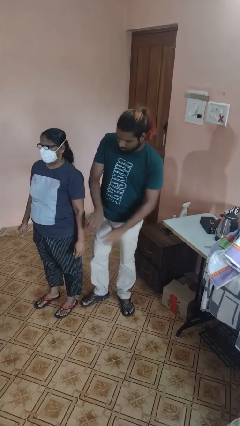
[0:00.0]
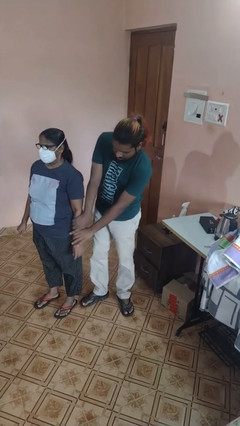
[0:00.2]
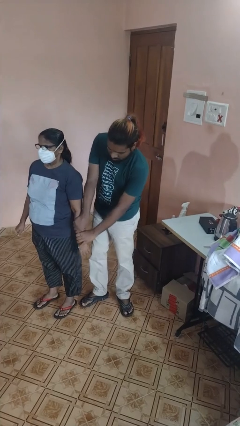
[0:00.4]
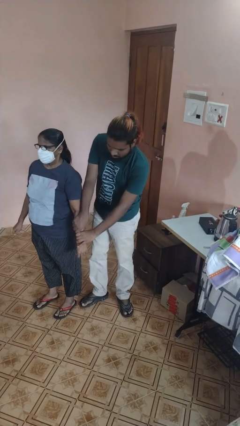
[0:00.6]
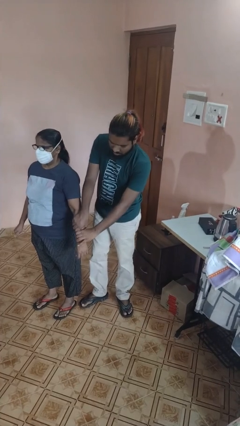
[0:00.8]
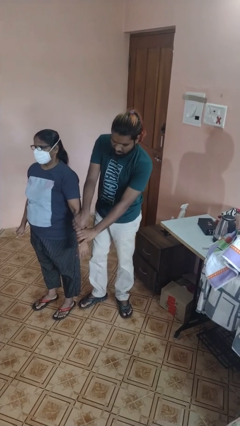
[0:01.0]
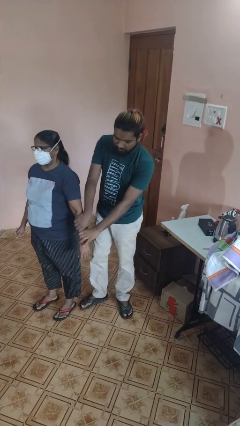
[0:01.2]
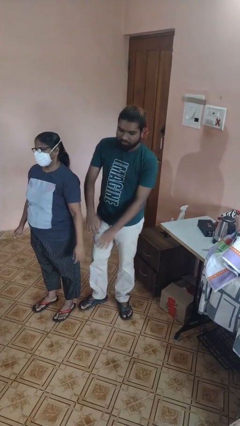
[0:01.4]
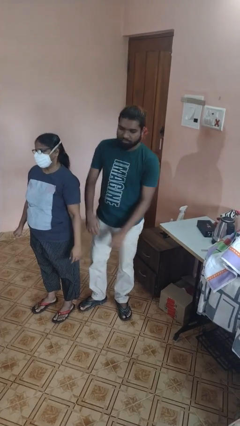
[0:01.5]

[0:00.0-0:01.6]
person grabs person by forearm

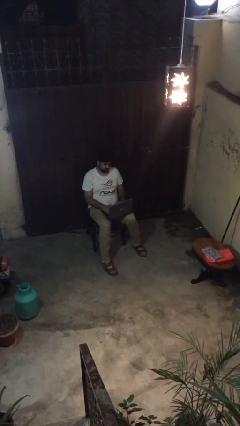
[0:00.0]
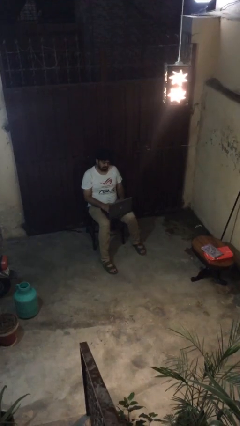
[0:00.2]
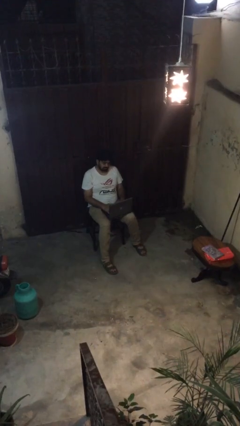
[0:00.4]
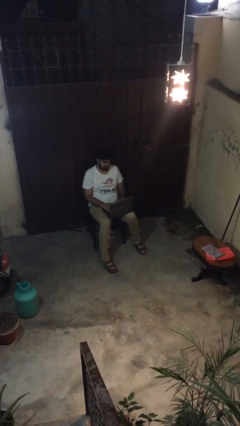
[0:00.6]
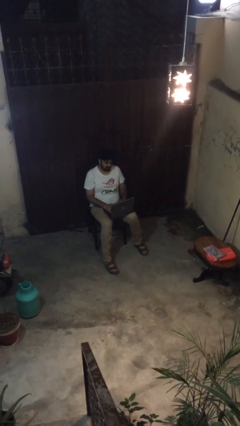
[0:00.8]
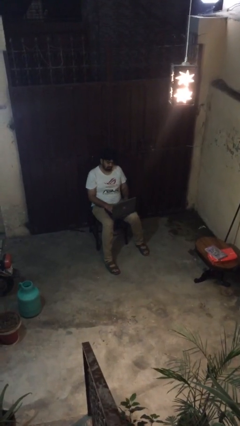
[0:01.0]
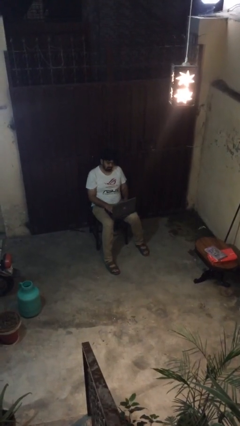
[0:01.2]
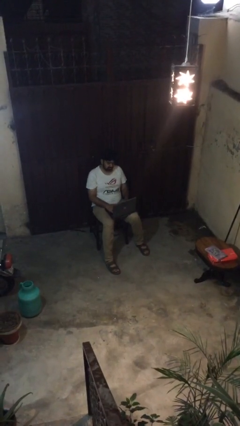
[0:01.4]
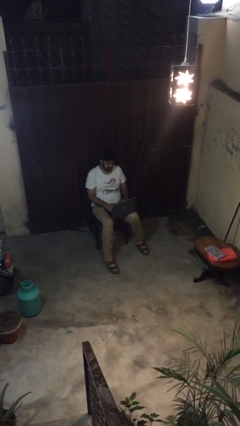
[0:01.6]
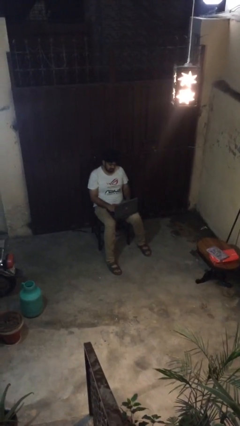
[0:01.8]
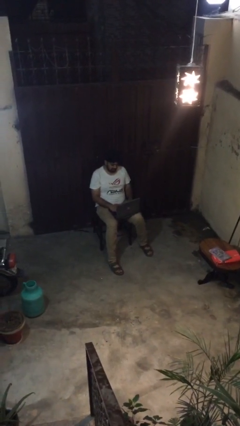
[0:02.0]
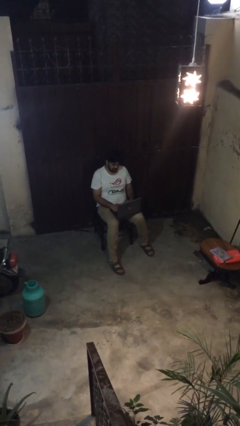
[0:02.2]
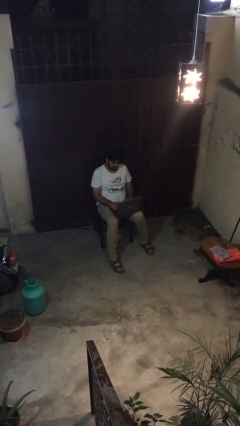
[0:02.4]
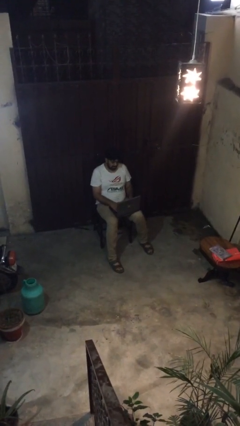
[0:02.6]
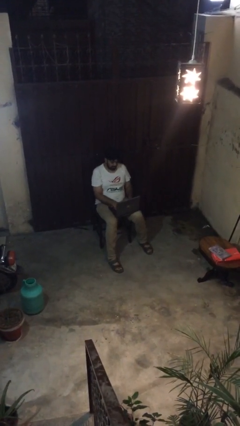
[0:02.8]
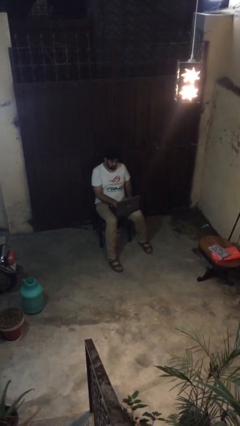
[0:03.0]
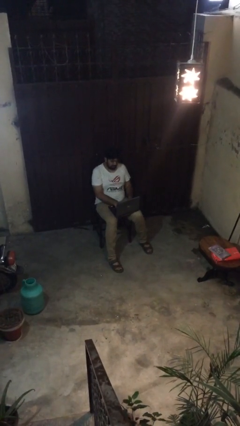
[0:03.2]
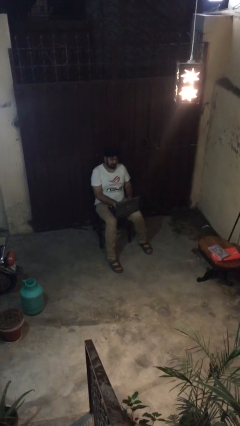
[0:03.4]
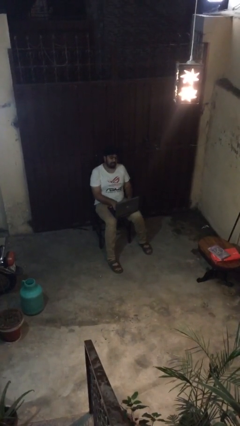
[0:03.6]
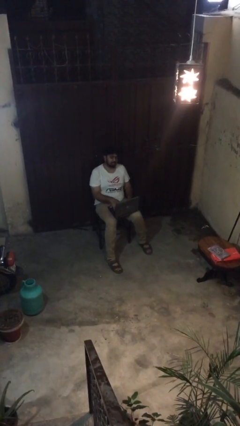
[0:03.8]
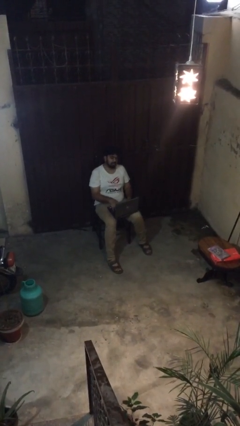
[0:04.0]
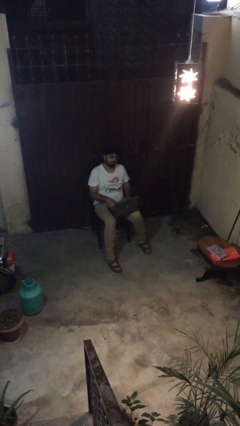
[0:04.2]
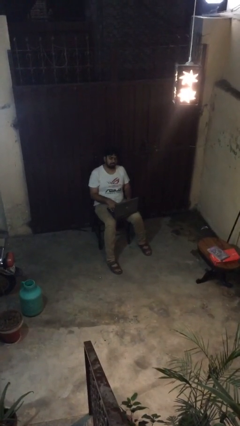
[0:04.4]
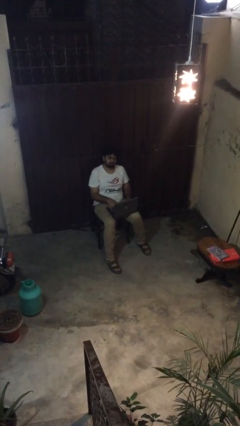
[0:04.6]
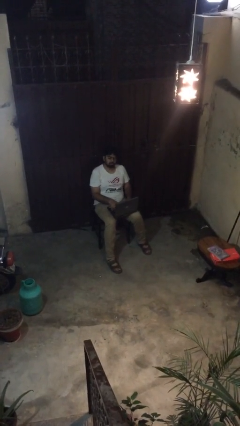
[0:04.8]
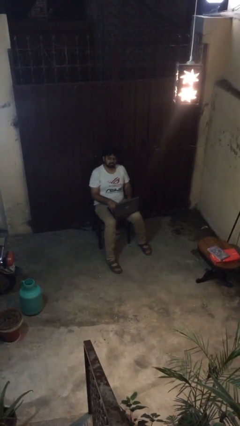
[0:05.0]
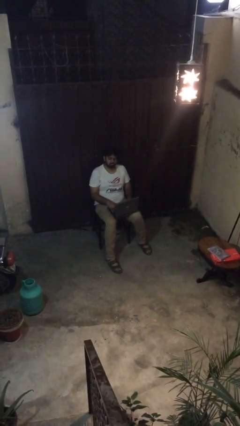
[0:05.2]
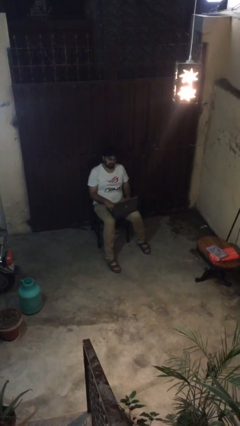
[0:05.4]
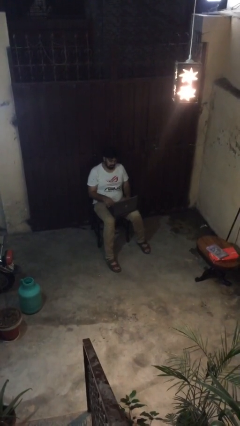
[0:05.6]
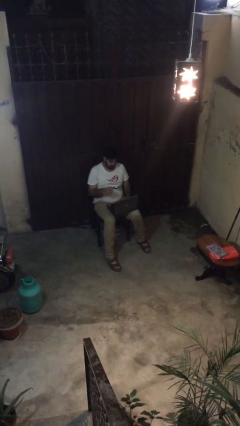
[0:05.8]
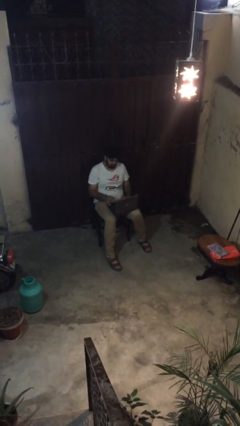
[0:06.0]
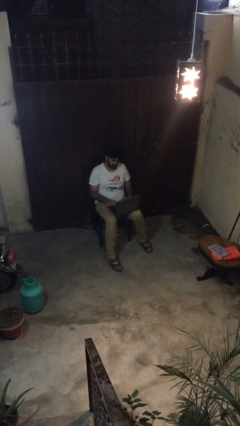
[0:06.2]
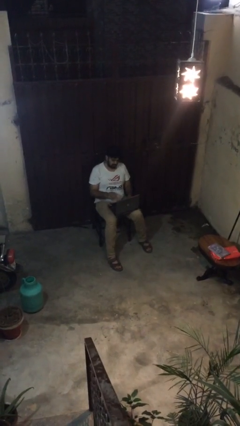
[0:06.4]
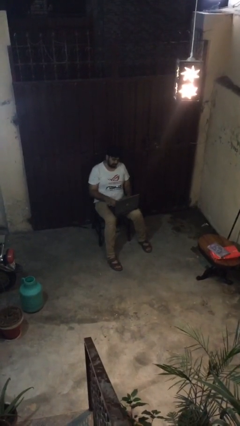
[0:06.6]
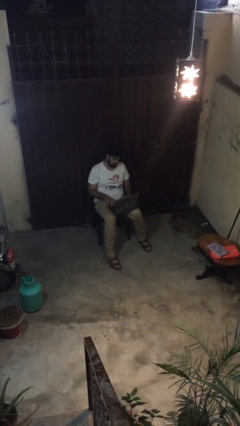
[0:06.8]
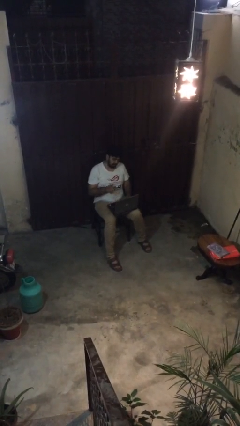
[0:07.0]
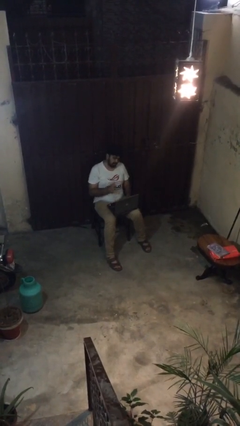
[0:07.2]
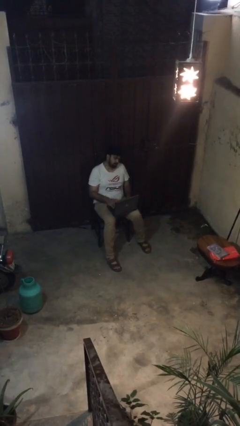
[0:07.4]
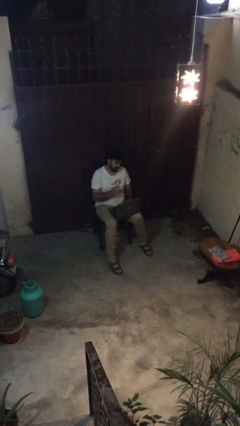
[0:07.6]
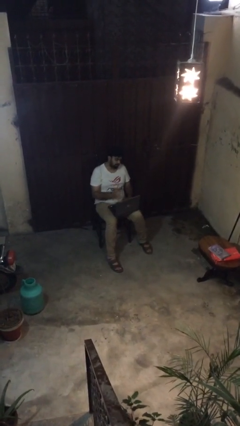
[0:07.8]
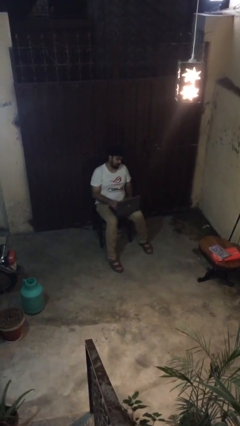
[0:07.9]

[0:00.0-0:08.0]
person interacts with laptop

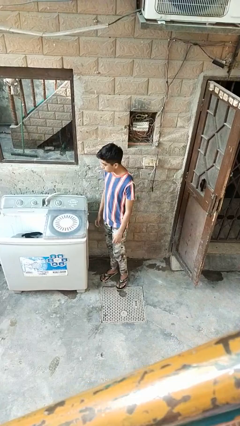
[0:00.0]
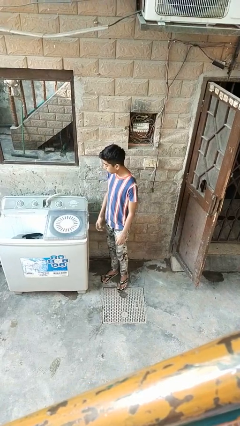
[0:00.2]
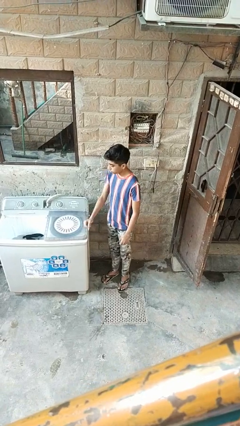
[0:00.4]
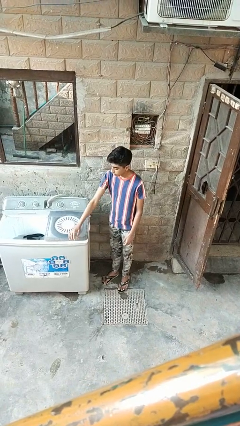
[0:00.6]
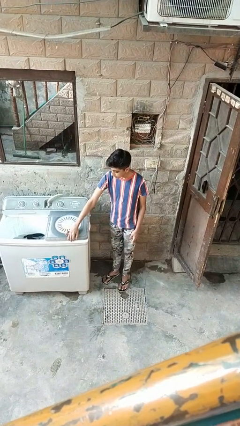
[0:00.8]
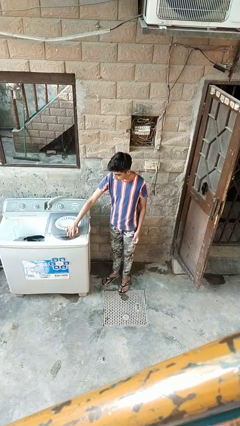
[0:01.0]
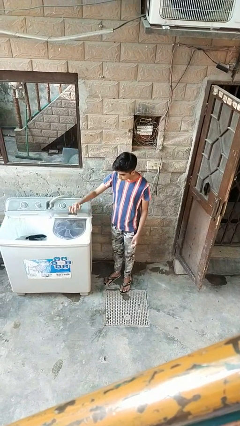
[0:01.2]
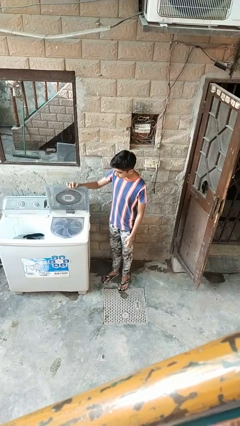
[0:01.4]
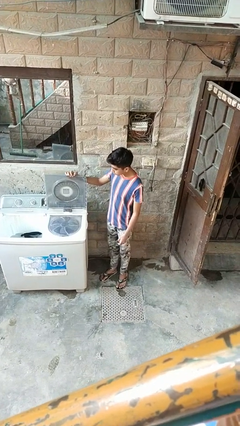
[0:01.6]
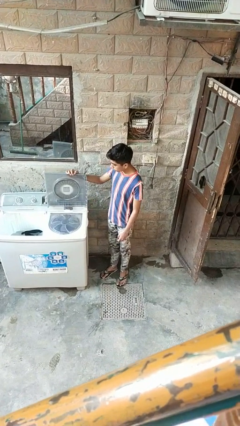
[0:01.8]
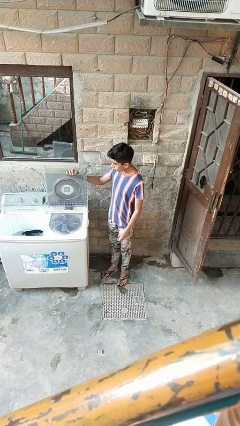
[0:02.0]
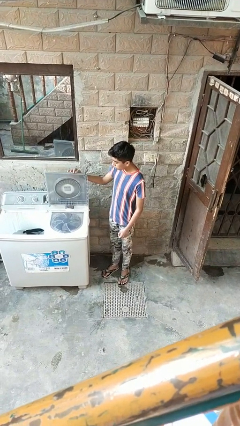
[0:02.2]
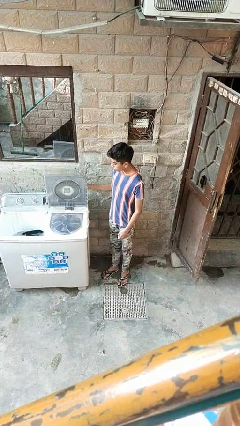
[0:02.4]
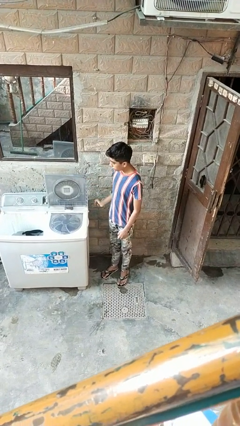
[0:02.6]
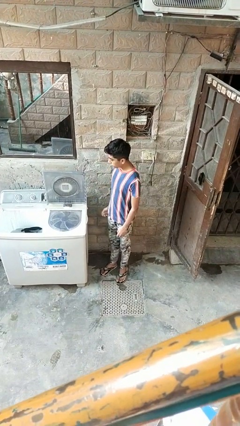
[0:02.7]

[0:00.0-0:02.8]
person opens clothes washer

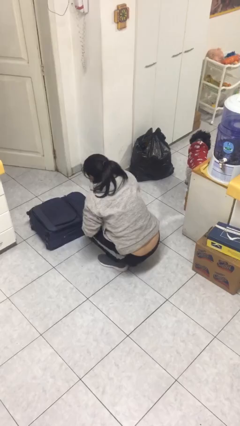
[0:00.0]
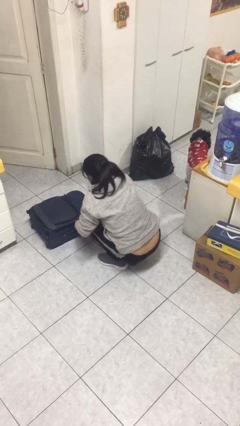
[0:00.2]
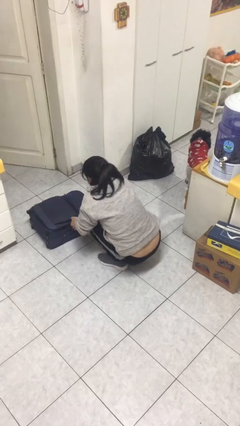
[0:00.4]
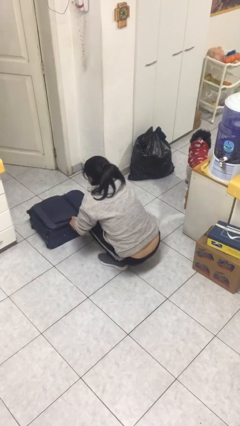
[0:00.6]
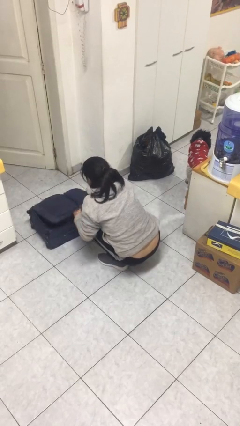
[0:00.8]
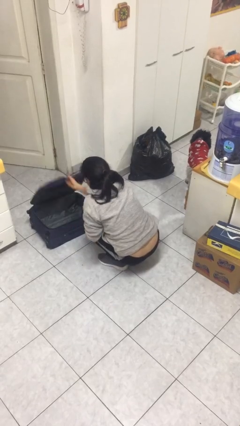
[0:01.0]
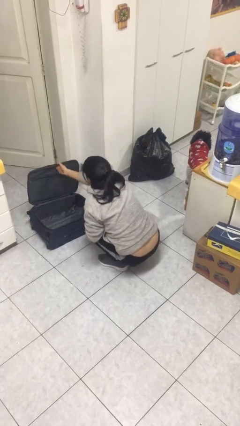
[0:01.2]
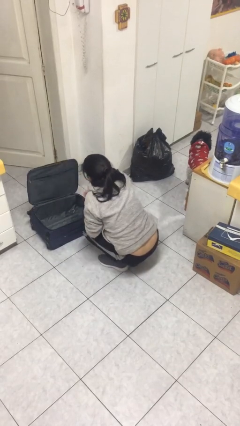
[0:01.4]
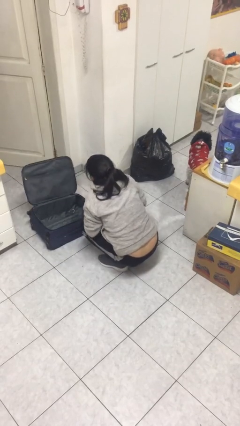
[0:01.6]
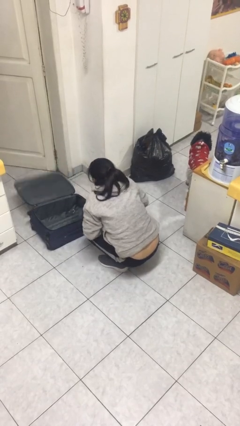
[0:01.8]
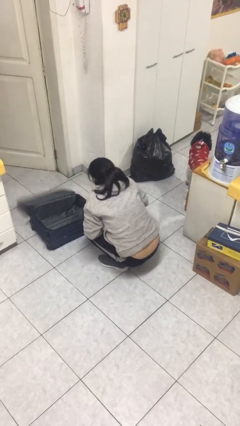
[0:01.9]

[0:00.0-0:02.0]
person opens suitcase

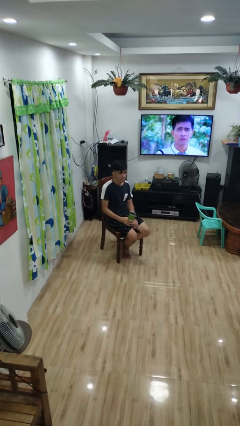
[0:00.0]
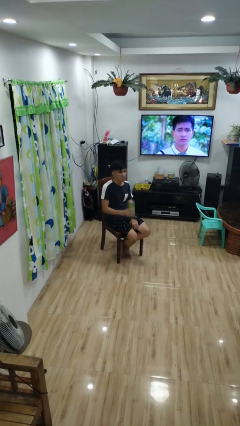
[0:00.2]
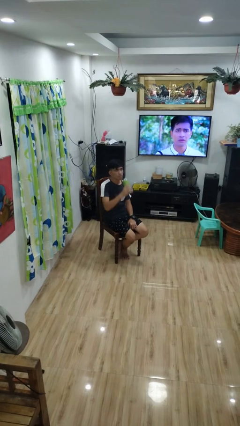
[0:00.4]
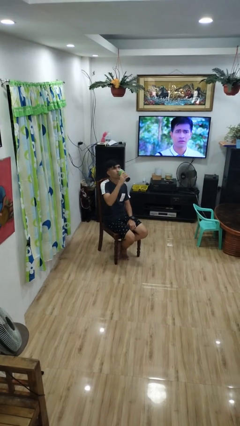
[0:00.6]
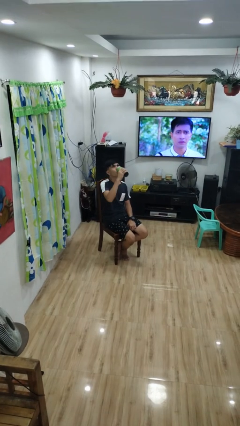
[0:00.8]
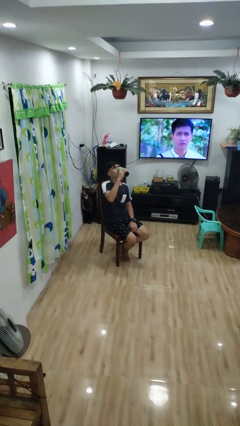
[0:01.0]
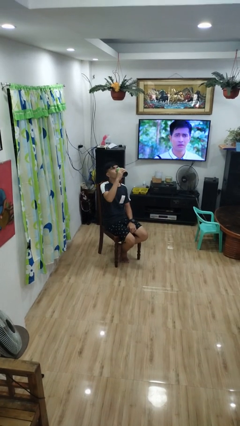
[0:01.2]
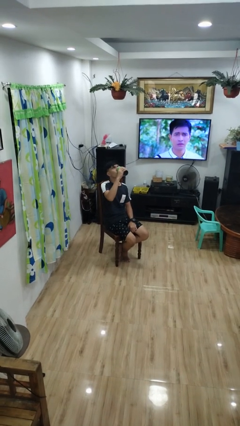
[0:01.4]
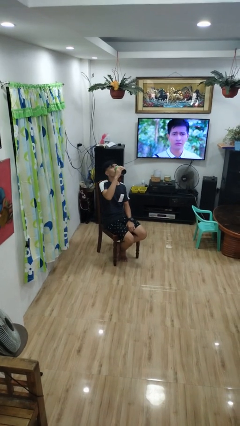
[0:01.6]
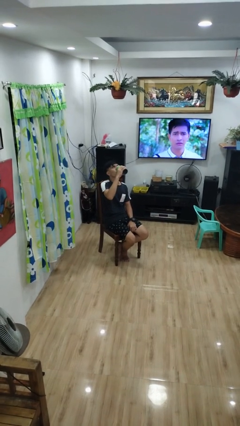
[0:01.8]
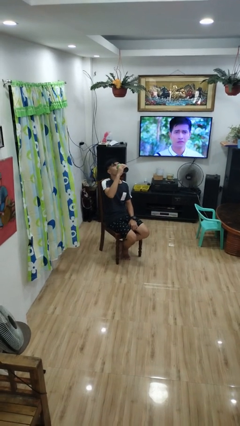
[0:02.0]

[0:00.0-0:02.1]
person drinks from bottle

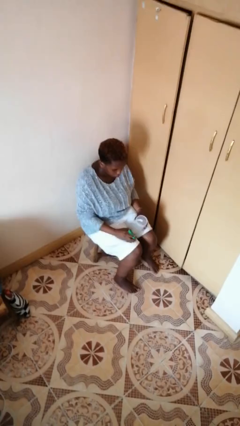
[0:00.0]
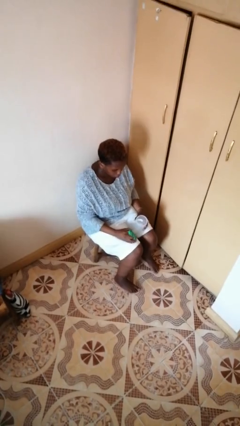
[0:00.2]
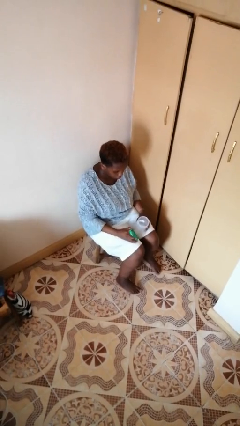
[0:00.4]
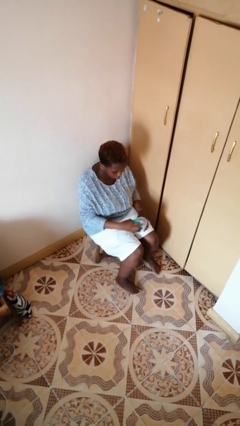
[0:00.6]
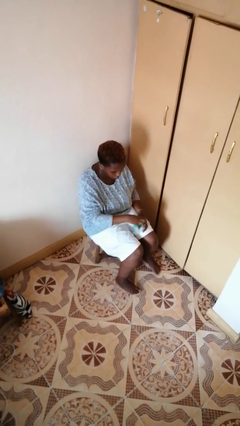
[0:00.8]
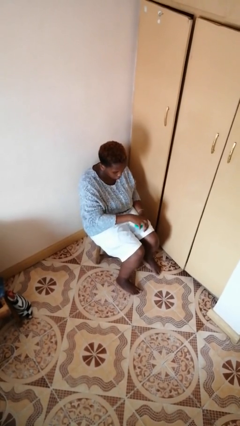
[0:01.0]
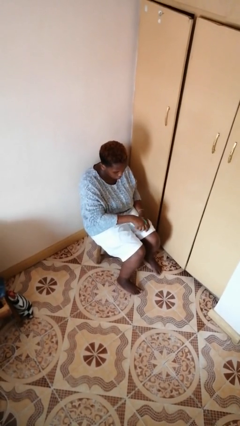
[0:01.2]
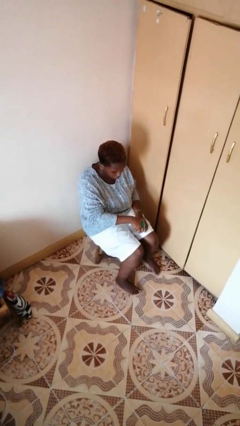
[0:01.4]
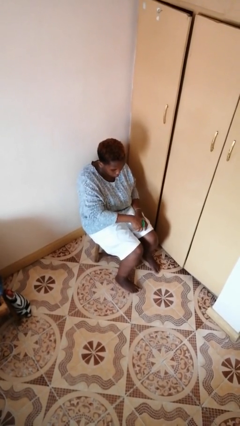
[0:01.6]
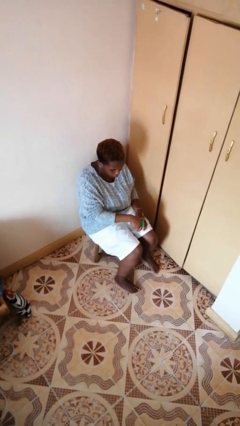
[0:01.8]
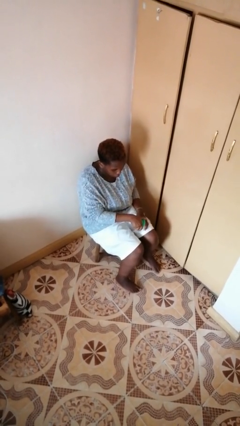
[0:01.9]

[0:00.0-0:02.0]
person closes jar
